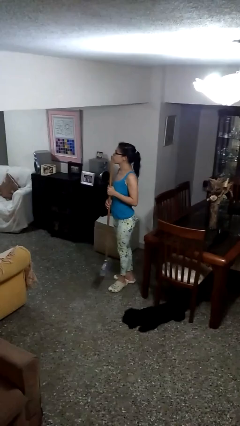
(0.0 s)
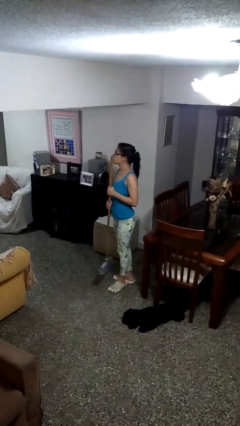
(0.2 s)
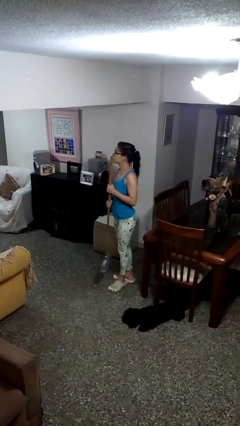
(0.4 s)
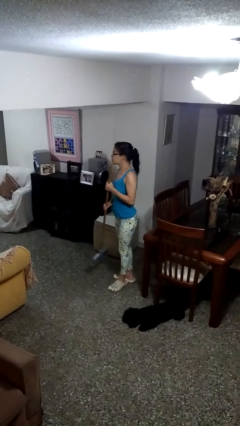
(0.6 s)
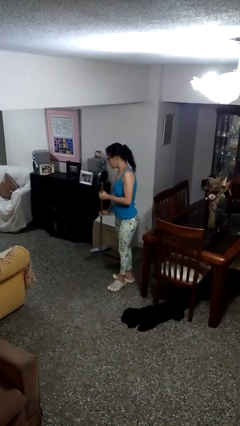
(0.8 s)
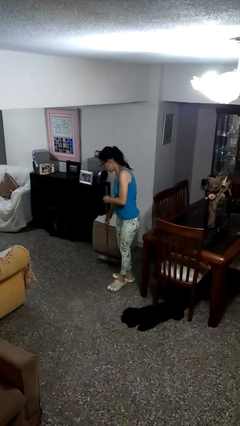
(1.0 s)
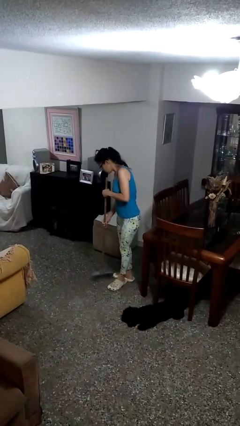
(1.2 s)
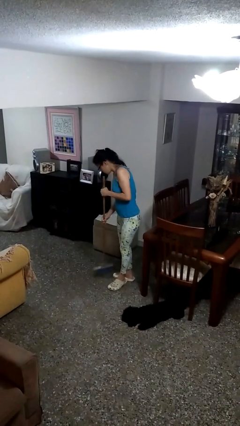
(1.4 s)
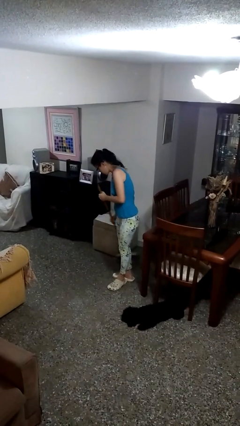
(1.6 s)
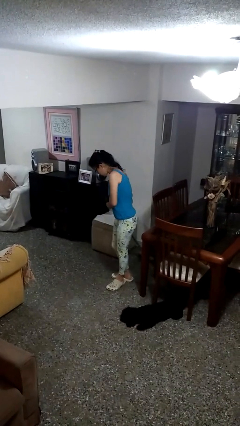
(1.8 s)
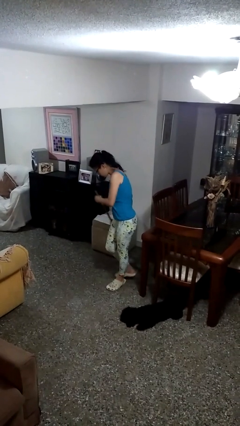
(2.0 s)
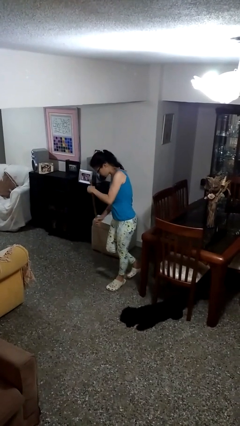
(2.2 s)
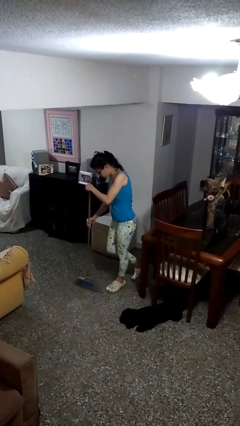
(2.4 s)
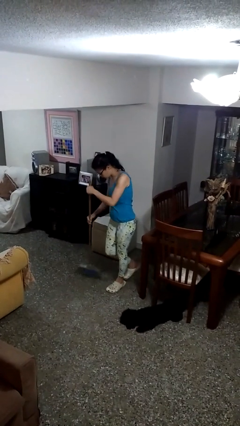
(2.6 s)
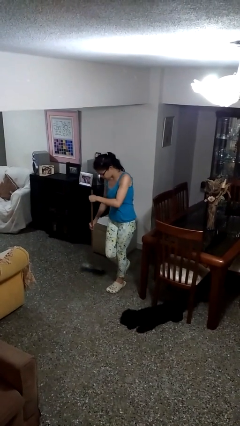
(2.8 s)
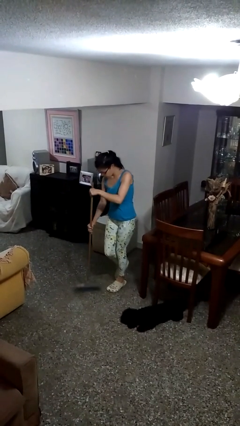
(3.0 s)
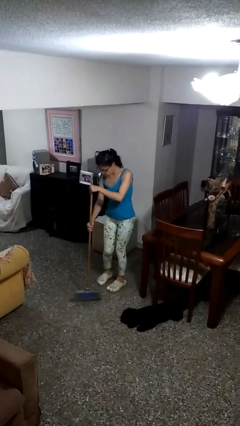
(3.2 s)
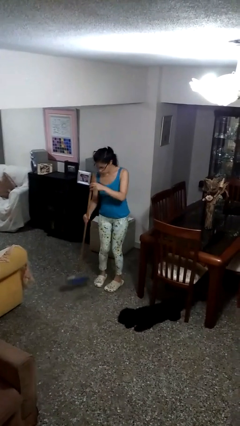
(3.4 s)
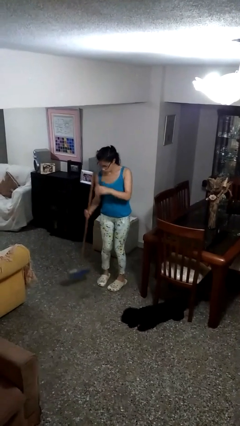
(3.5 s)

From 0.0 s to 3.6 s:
person sweeps floor

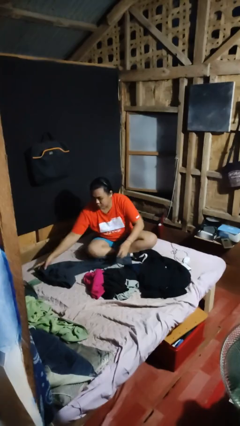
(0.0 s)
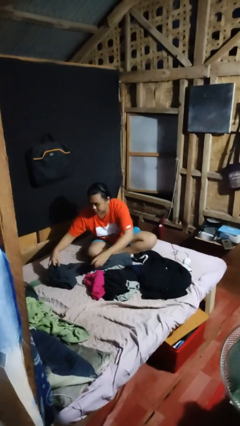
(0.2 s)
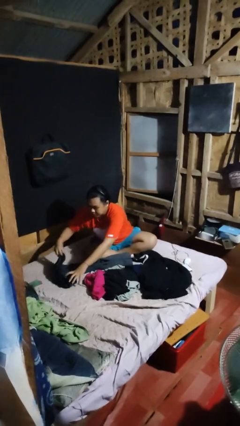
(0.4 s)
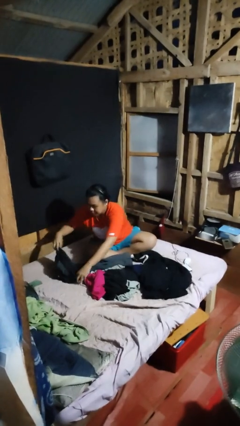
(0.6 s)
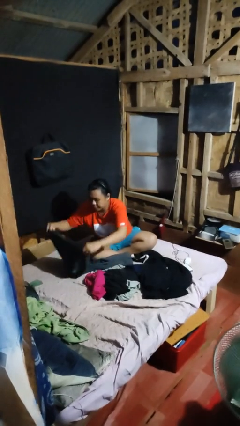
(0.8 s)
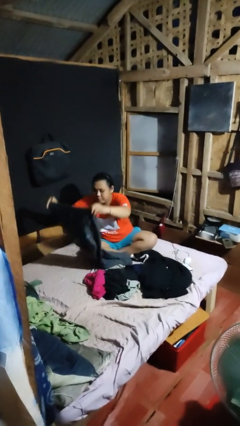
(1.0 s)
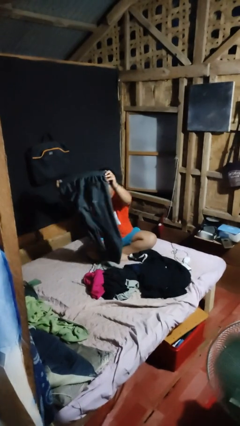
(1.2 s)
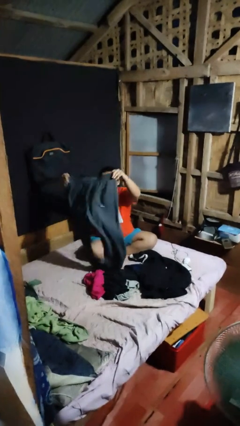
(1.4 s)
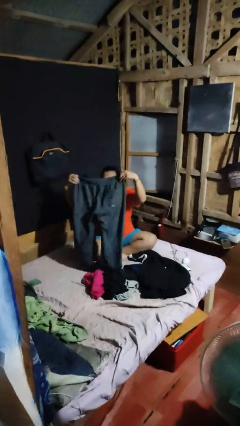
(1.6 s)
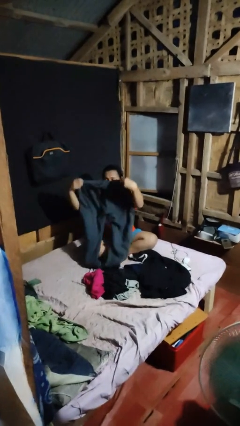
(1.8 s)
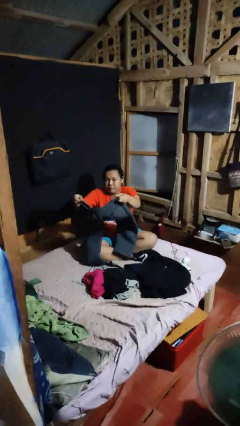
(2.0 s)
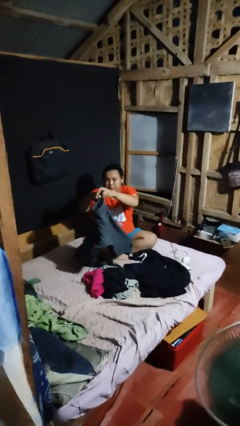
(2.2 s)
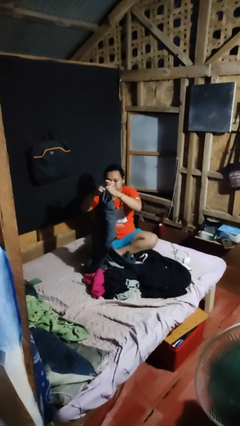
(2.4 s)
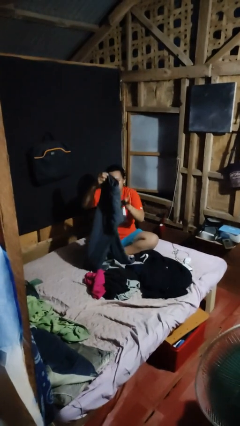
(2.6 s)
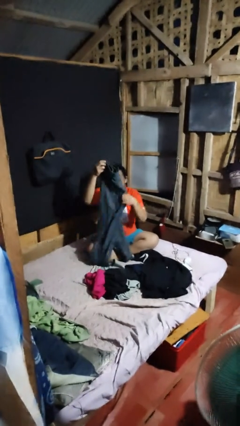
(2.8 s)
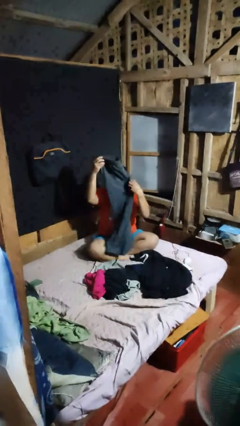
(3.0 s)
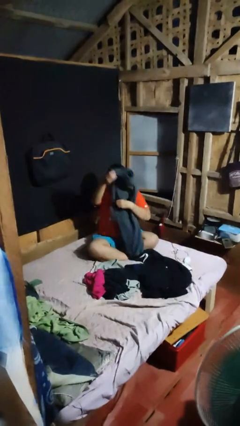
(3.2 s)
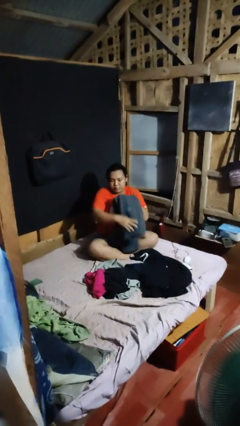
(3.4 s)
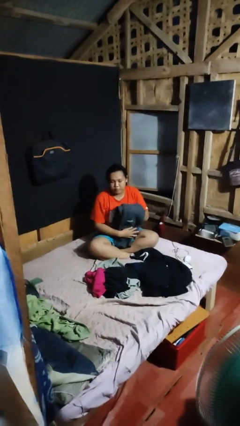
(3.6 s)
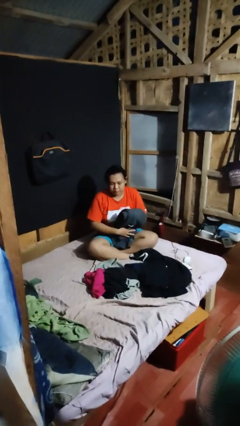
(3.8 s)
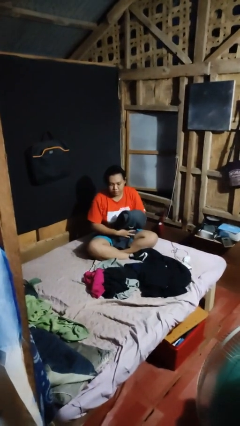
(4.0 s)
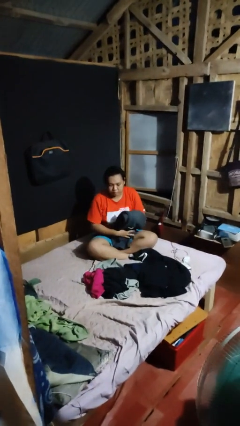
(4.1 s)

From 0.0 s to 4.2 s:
person folds pants

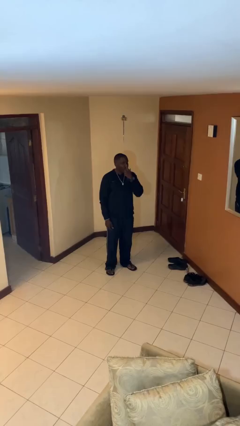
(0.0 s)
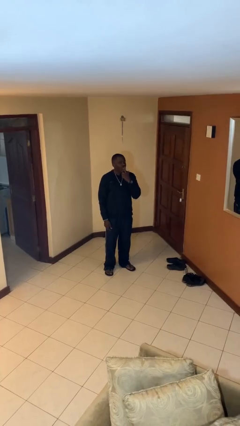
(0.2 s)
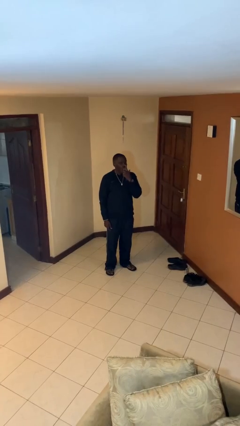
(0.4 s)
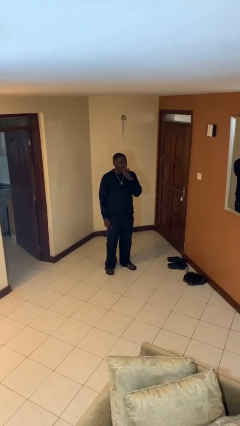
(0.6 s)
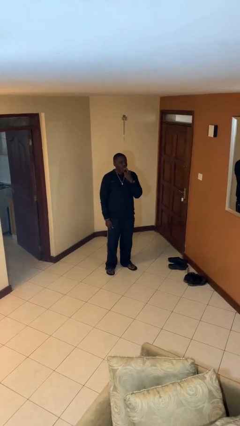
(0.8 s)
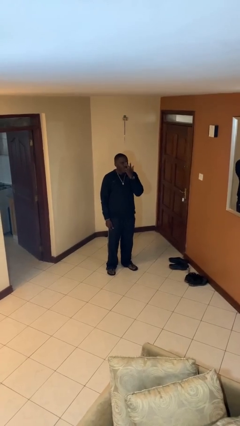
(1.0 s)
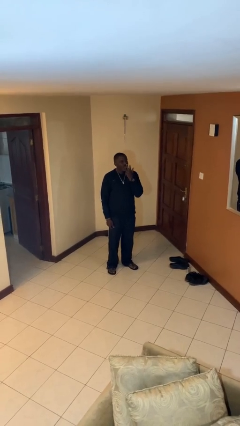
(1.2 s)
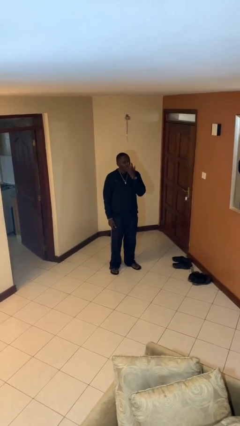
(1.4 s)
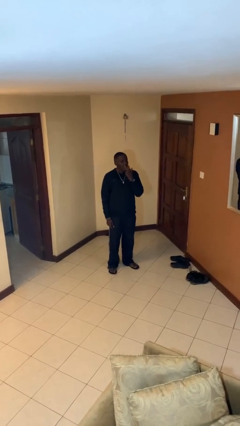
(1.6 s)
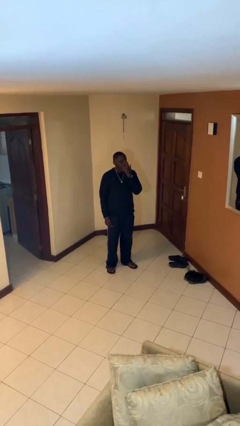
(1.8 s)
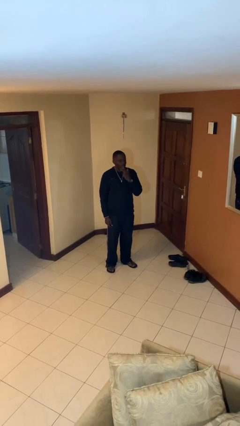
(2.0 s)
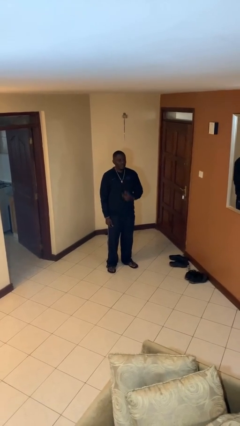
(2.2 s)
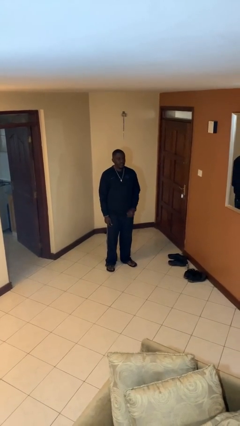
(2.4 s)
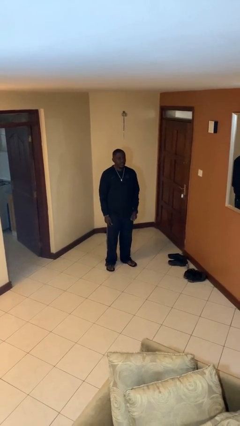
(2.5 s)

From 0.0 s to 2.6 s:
person licks fingers

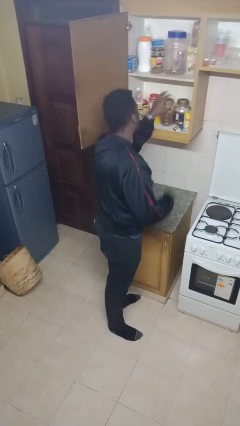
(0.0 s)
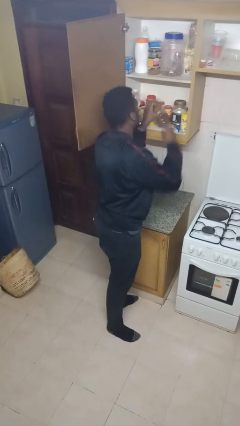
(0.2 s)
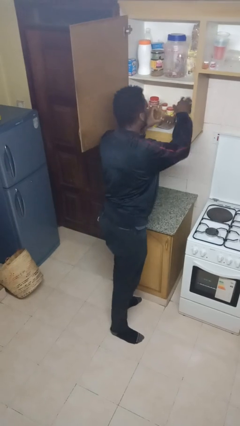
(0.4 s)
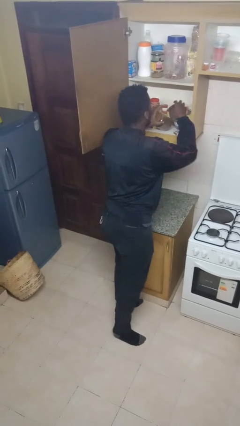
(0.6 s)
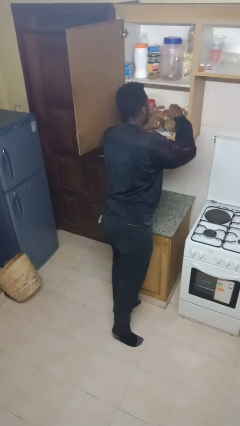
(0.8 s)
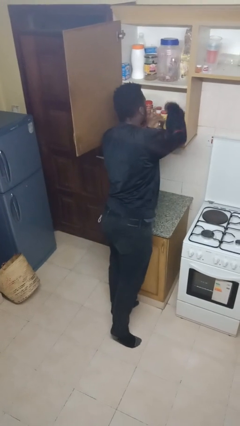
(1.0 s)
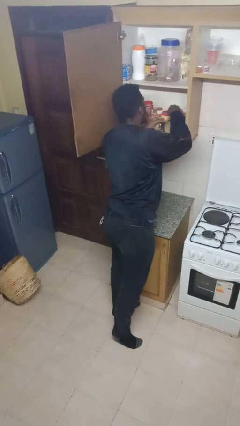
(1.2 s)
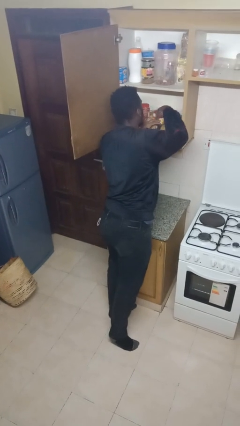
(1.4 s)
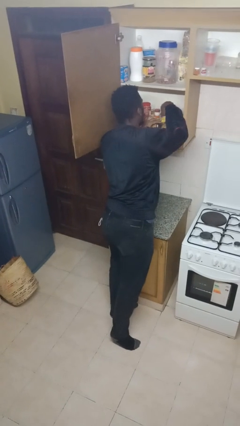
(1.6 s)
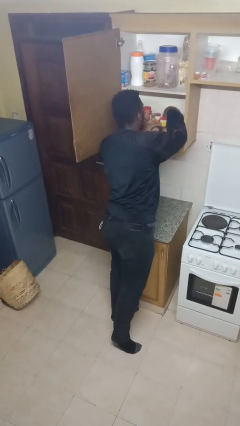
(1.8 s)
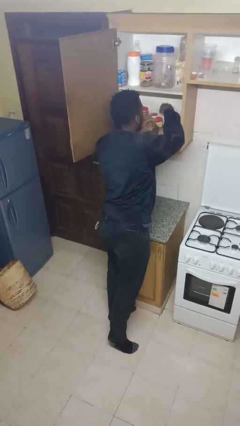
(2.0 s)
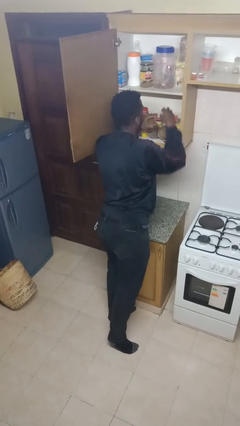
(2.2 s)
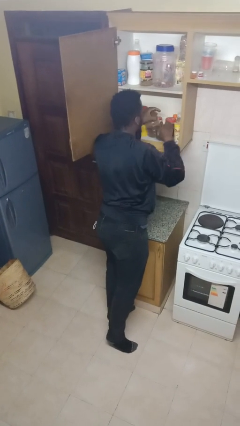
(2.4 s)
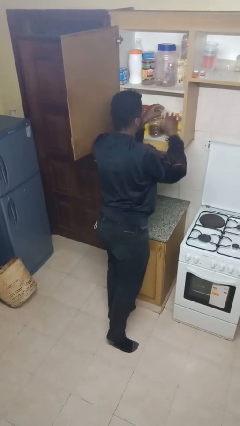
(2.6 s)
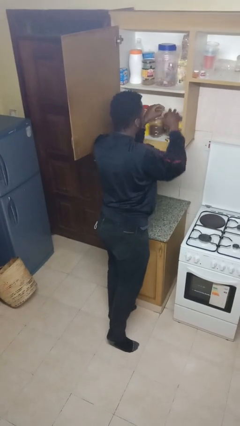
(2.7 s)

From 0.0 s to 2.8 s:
person searches in cabinet

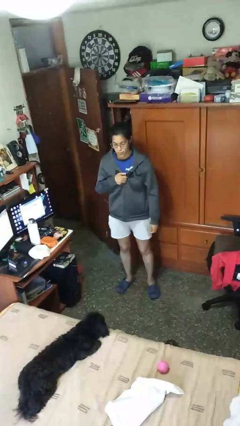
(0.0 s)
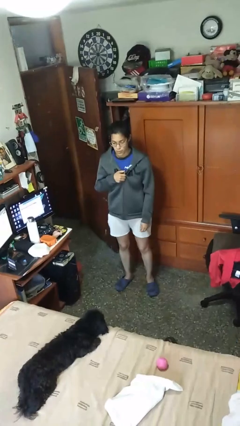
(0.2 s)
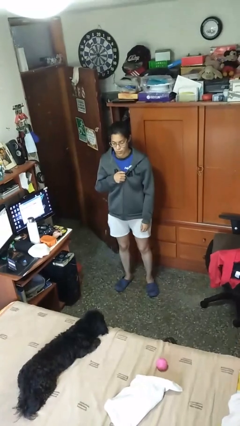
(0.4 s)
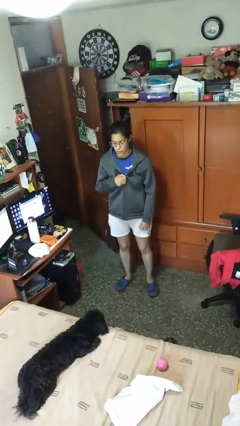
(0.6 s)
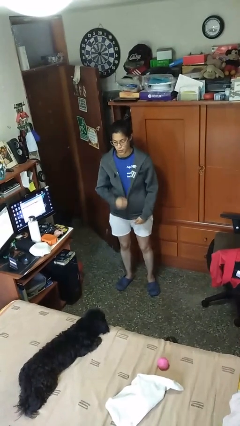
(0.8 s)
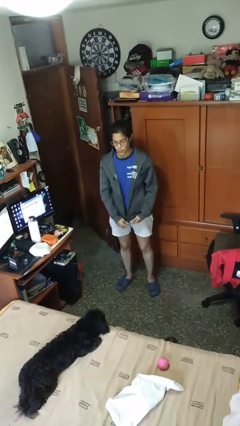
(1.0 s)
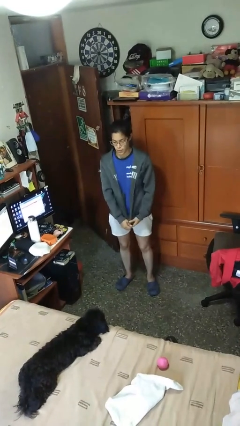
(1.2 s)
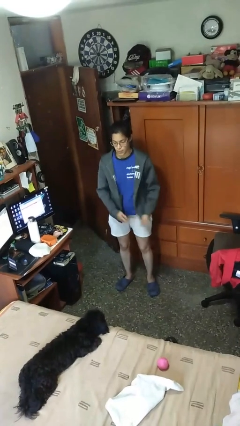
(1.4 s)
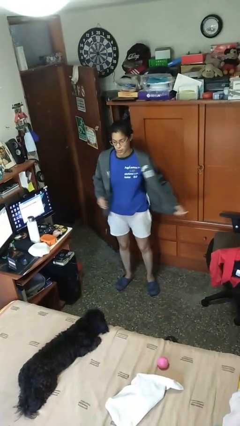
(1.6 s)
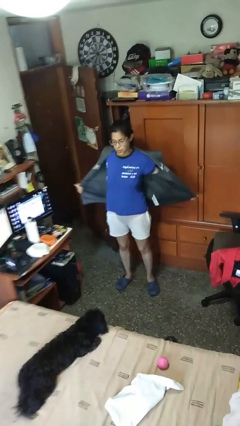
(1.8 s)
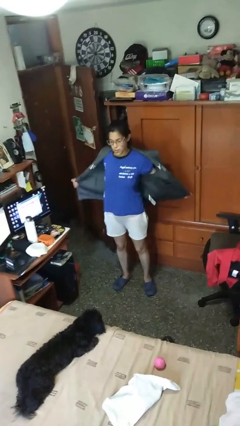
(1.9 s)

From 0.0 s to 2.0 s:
person unzips jacket

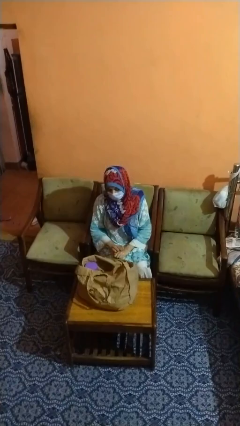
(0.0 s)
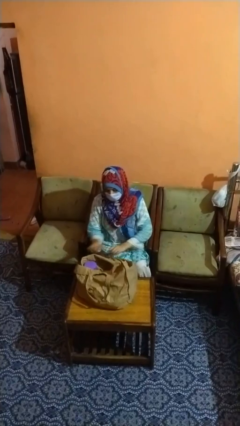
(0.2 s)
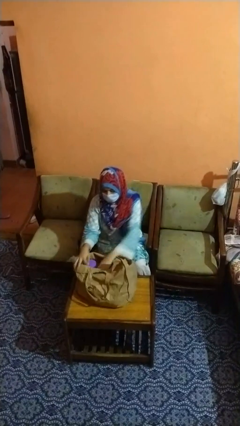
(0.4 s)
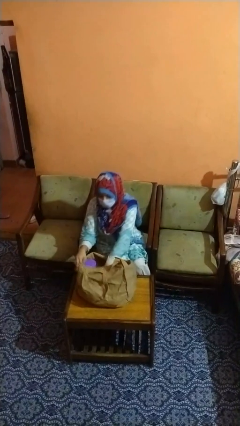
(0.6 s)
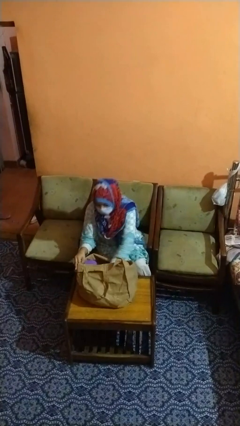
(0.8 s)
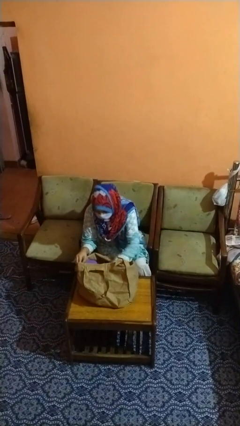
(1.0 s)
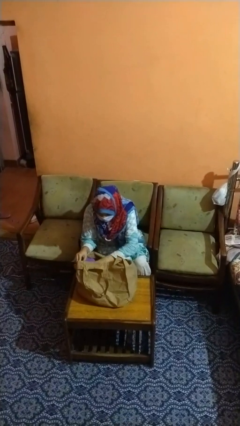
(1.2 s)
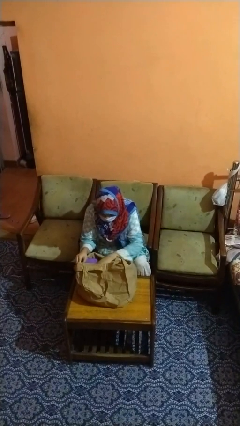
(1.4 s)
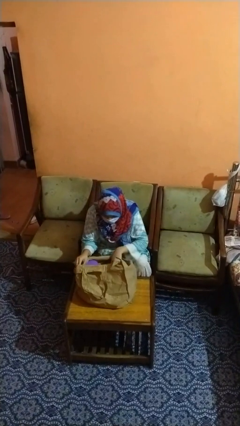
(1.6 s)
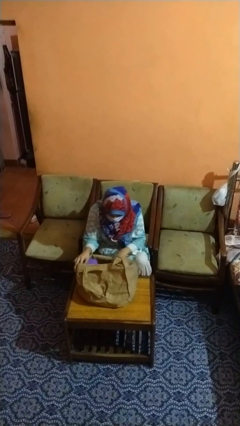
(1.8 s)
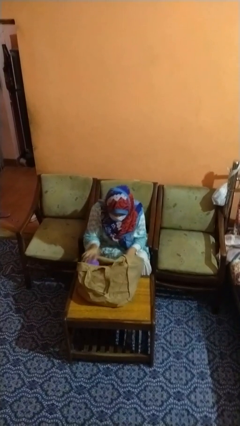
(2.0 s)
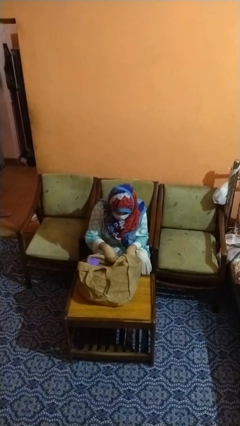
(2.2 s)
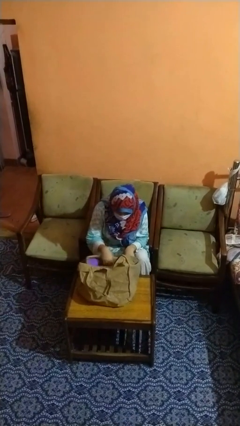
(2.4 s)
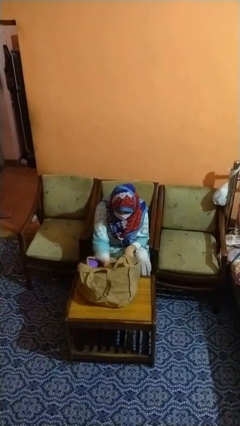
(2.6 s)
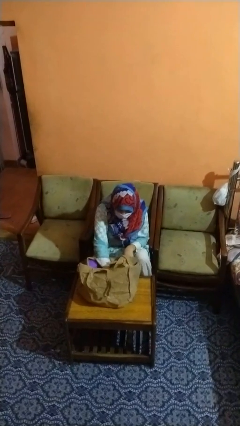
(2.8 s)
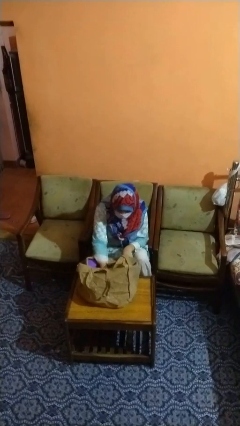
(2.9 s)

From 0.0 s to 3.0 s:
person searches in bag
